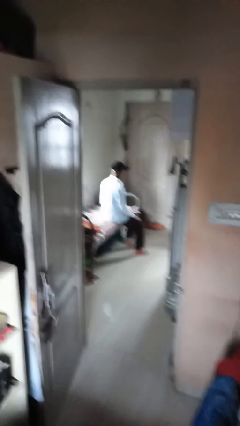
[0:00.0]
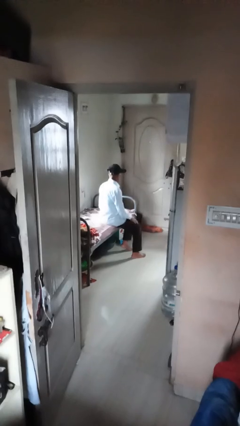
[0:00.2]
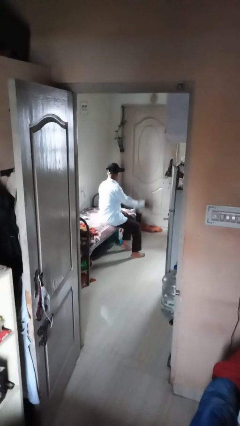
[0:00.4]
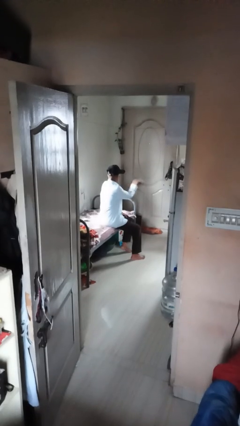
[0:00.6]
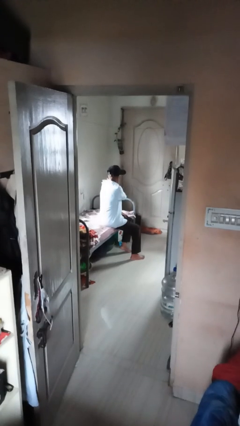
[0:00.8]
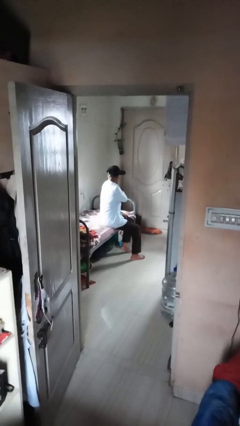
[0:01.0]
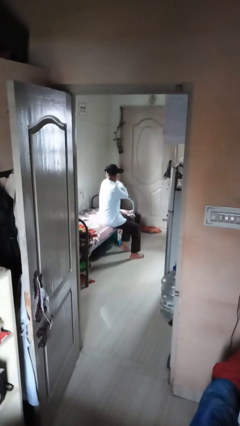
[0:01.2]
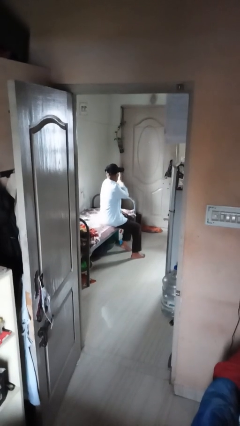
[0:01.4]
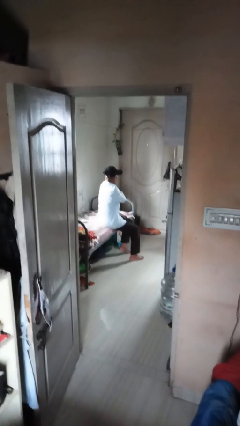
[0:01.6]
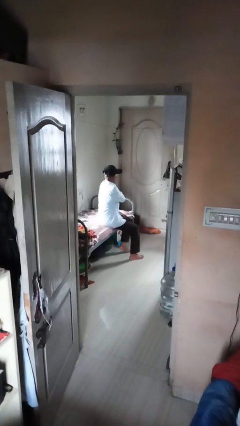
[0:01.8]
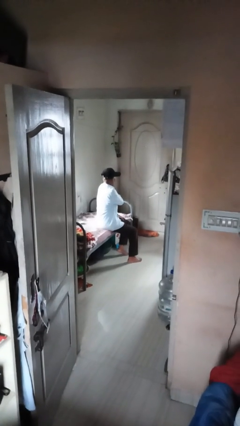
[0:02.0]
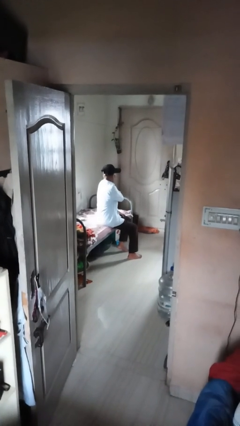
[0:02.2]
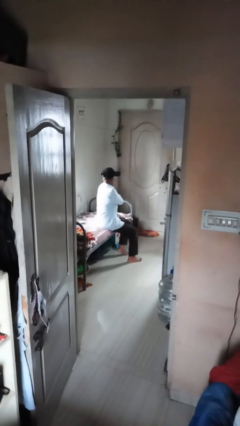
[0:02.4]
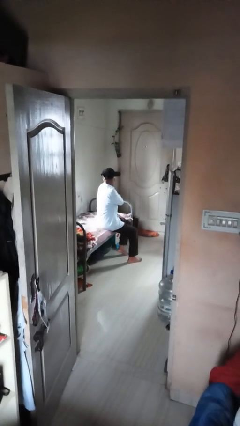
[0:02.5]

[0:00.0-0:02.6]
person swats bug

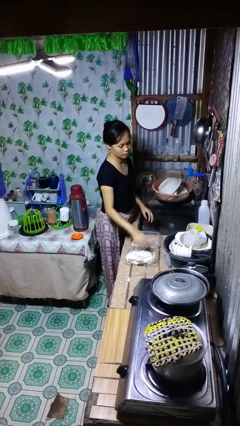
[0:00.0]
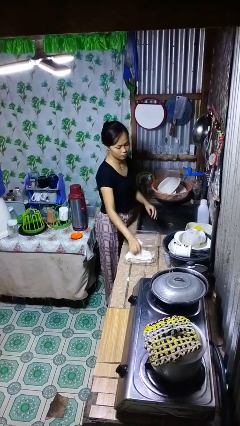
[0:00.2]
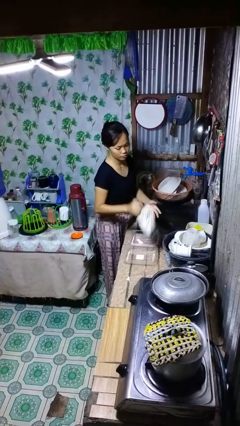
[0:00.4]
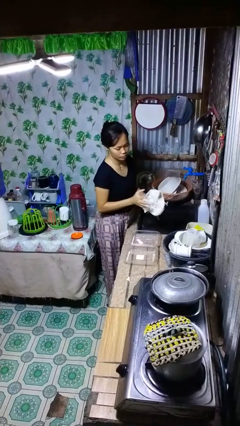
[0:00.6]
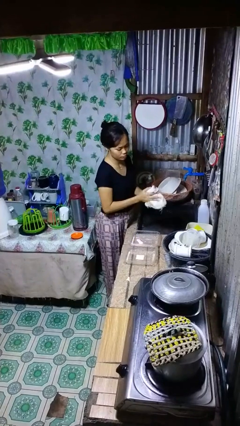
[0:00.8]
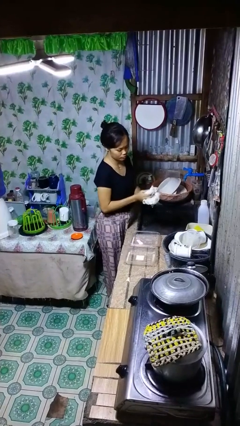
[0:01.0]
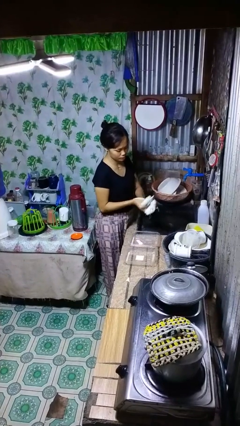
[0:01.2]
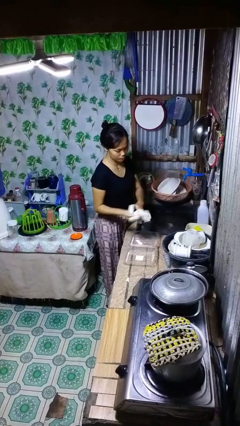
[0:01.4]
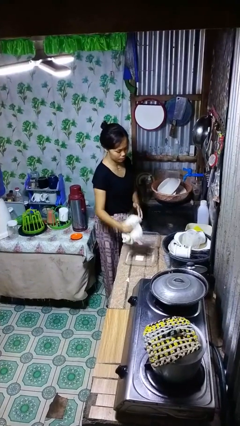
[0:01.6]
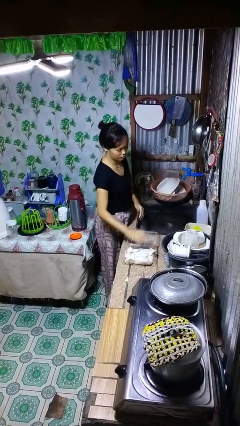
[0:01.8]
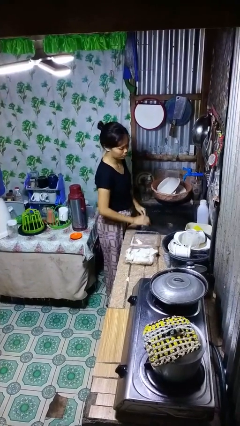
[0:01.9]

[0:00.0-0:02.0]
person dries hands with towel

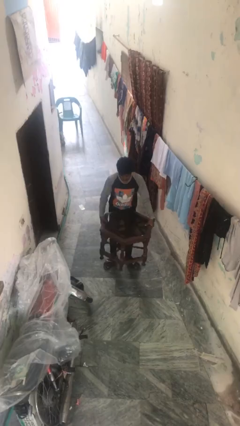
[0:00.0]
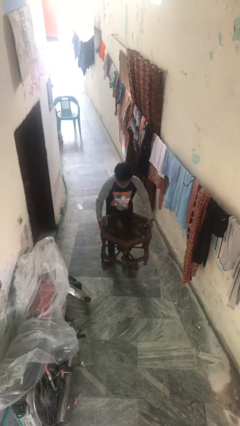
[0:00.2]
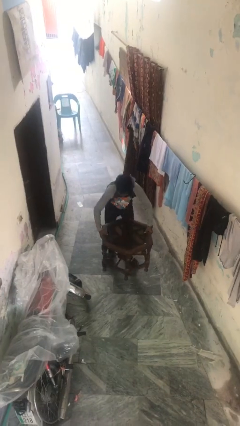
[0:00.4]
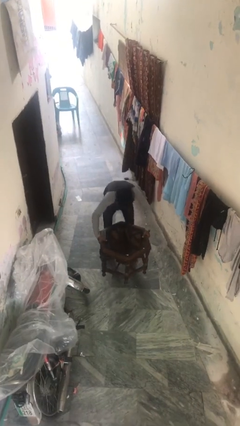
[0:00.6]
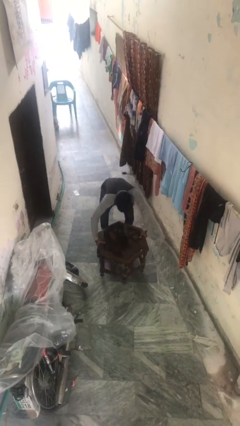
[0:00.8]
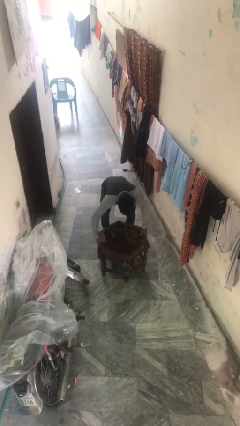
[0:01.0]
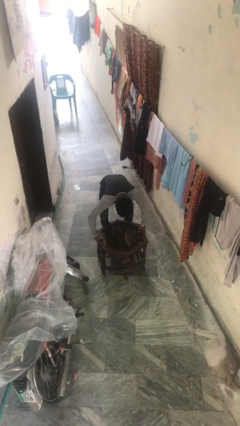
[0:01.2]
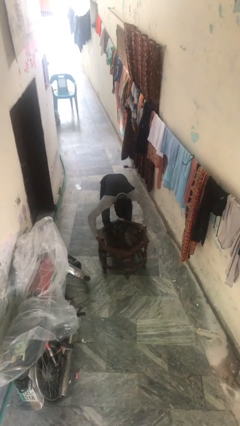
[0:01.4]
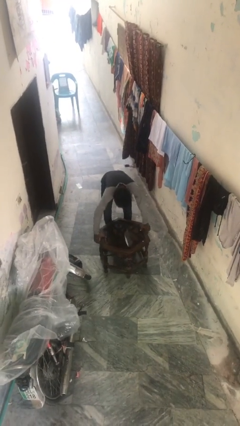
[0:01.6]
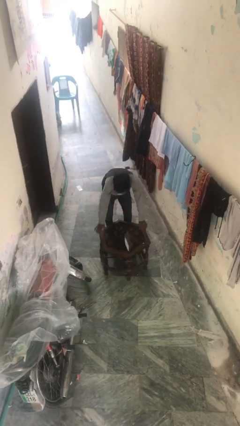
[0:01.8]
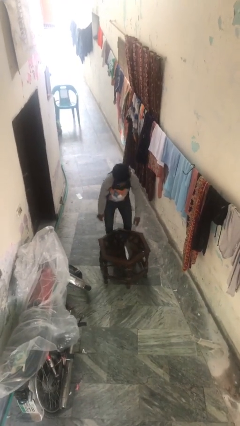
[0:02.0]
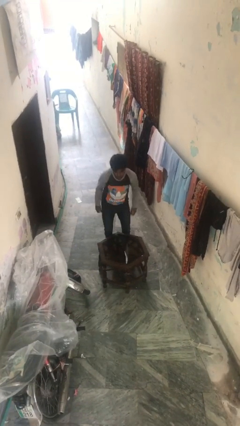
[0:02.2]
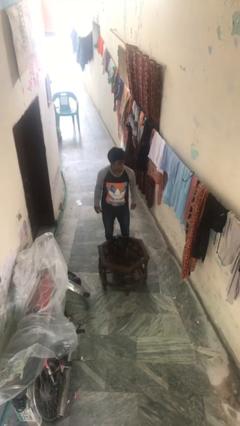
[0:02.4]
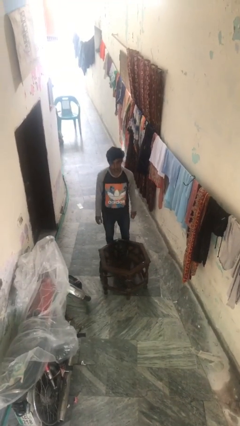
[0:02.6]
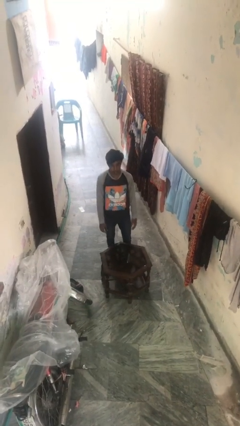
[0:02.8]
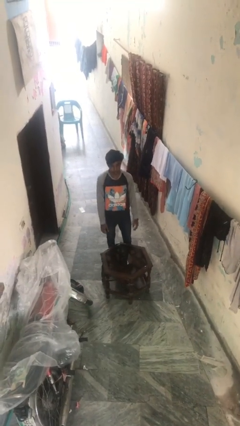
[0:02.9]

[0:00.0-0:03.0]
person puts down object on floor

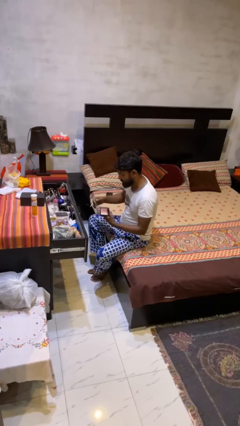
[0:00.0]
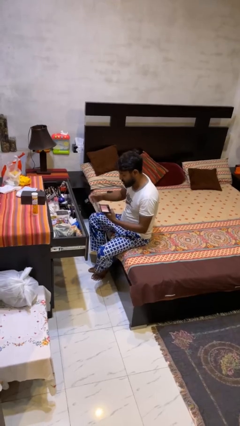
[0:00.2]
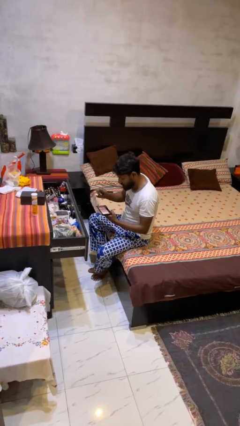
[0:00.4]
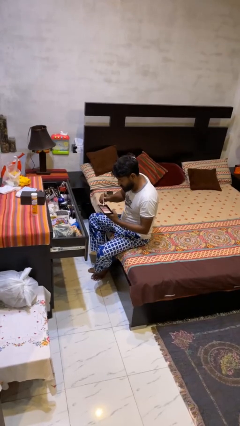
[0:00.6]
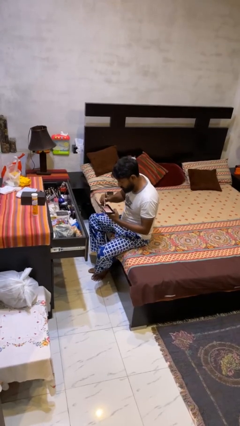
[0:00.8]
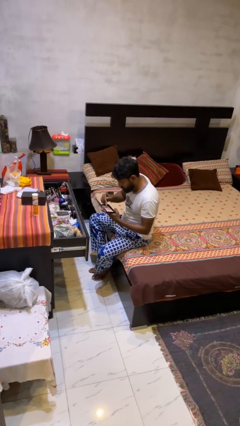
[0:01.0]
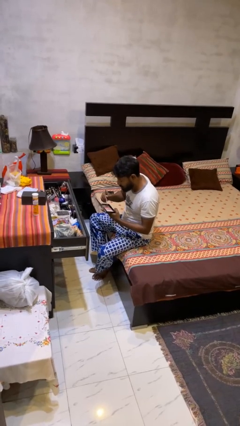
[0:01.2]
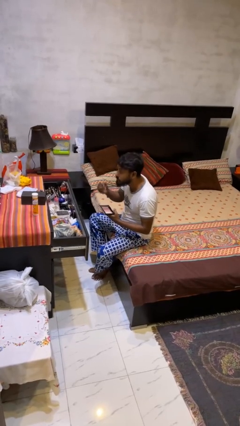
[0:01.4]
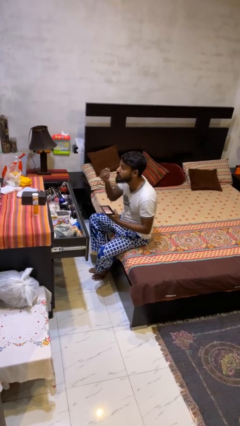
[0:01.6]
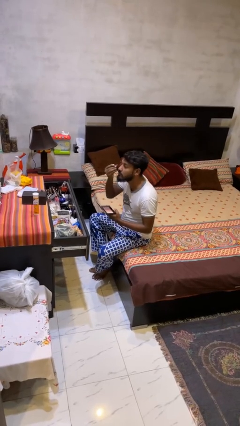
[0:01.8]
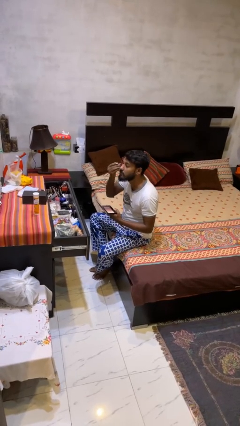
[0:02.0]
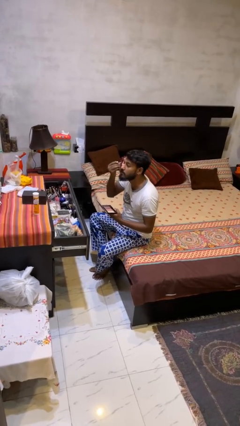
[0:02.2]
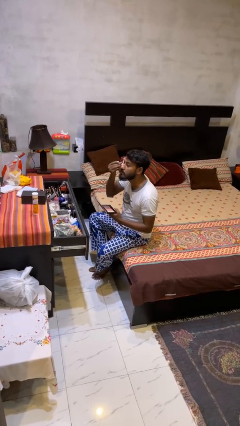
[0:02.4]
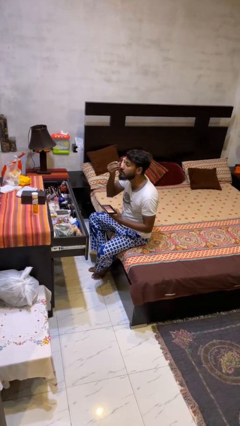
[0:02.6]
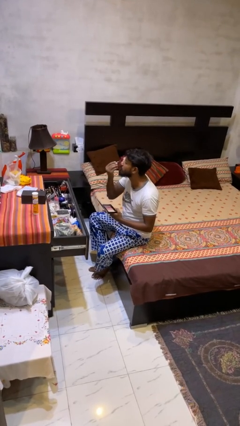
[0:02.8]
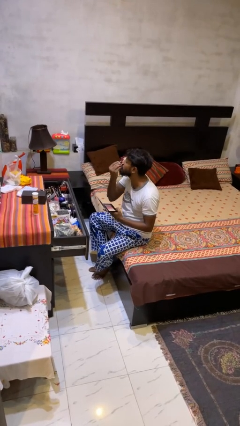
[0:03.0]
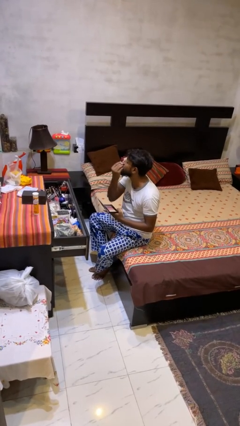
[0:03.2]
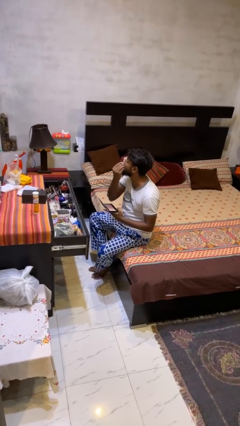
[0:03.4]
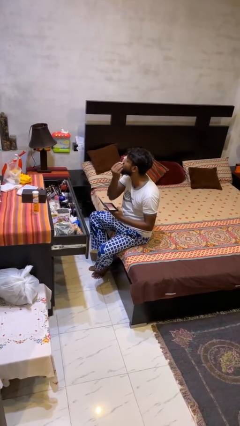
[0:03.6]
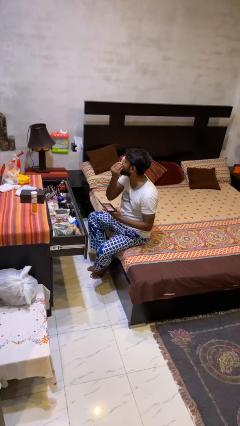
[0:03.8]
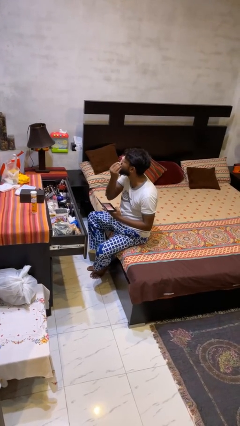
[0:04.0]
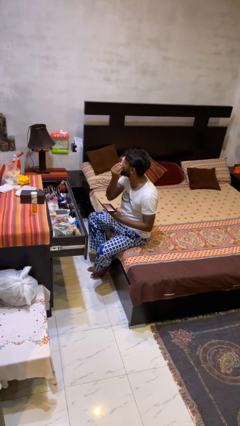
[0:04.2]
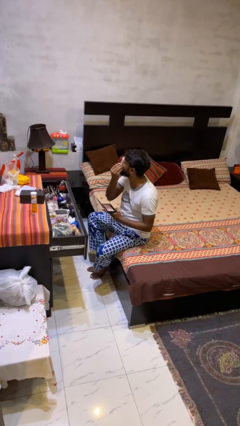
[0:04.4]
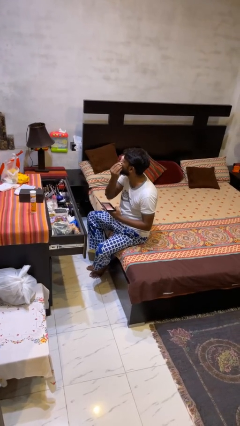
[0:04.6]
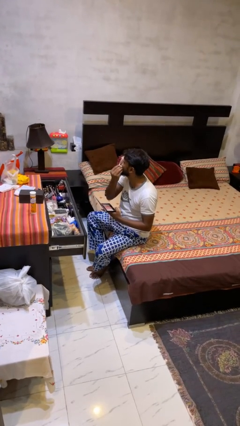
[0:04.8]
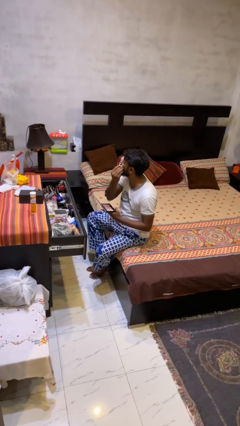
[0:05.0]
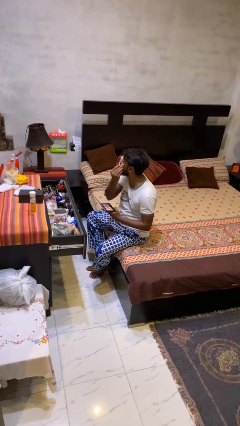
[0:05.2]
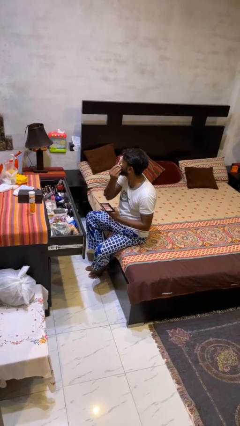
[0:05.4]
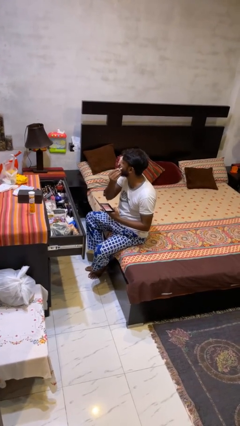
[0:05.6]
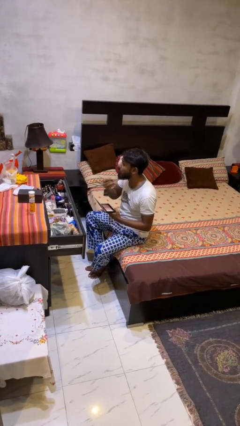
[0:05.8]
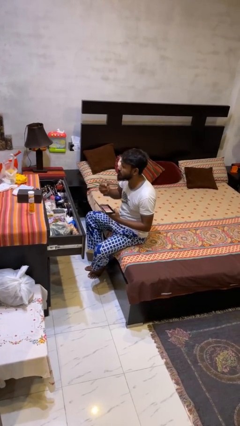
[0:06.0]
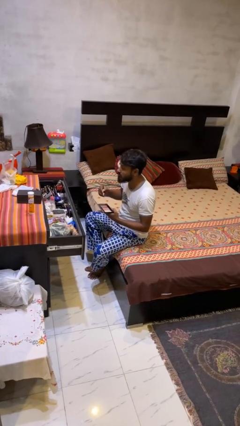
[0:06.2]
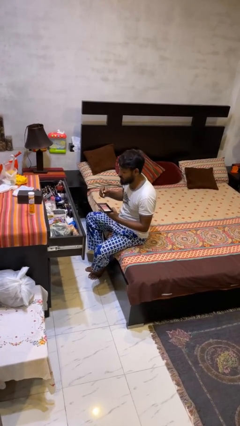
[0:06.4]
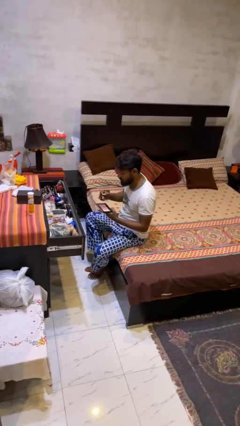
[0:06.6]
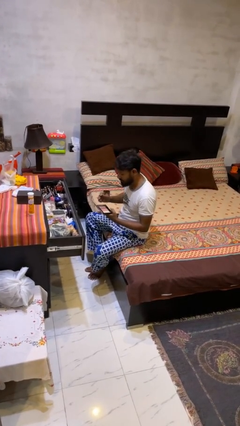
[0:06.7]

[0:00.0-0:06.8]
person applies eye makeup

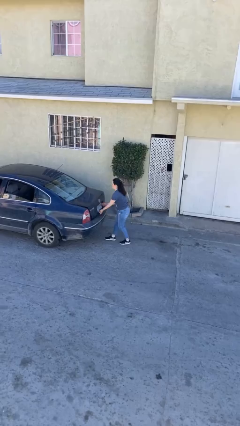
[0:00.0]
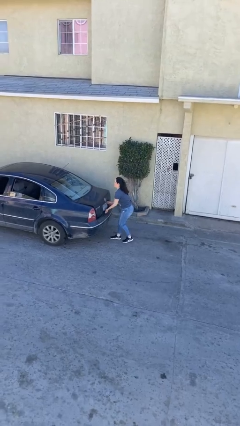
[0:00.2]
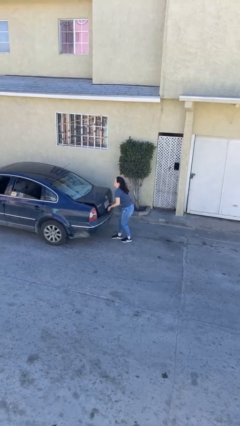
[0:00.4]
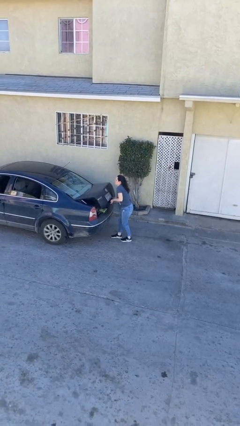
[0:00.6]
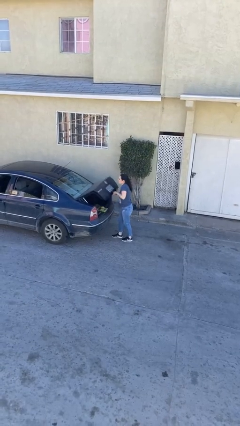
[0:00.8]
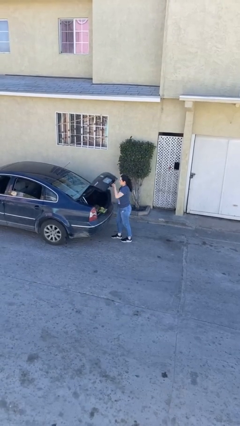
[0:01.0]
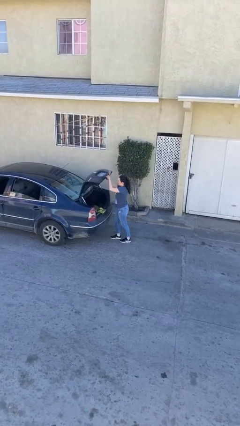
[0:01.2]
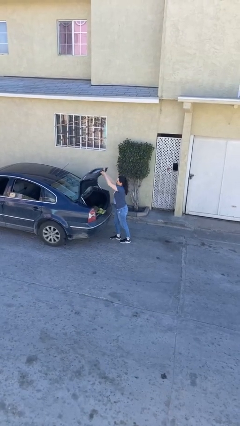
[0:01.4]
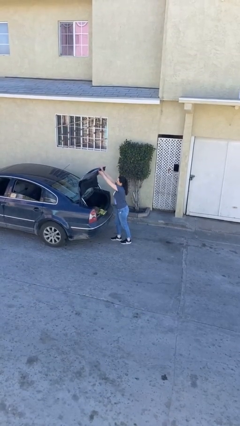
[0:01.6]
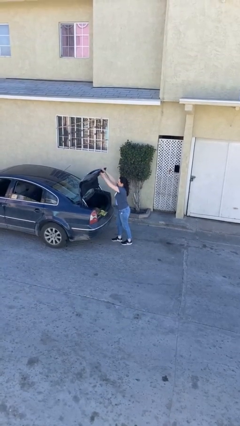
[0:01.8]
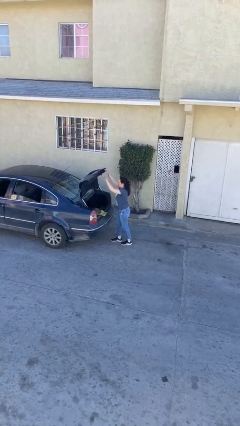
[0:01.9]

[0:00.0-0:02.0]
person opens car trunk

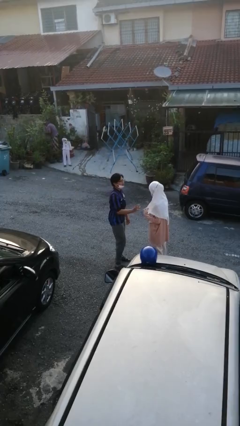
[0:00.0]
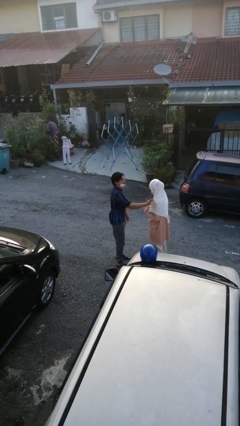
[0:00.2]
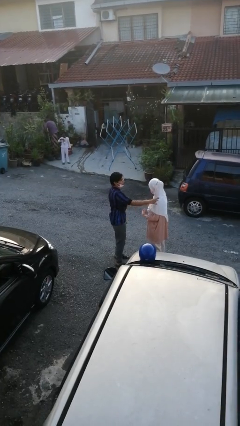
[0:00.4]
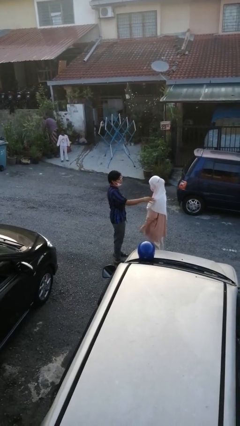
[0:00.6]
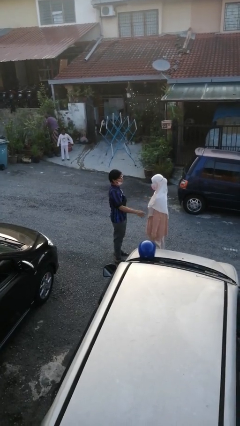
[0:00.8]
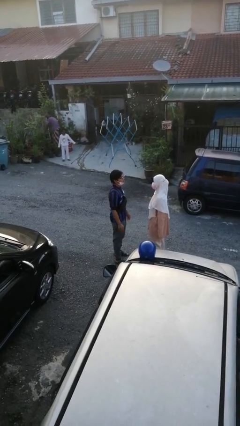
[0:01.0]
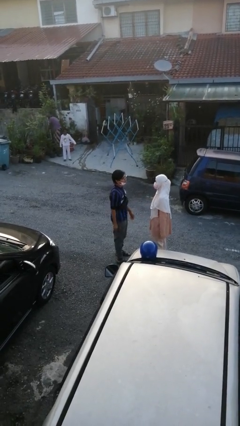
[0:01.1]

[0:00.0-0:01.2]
person shoves person
